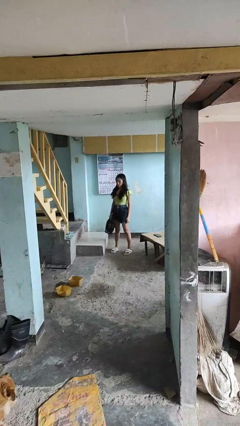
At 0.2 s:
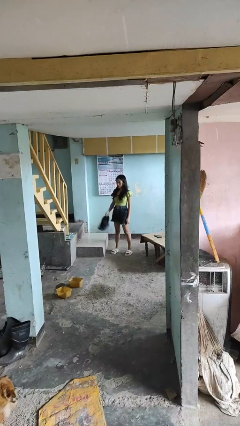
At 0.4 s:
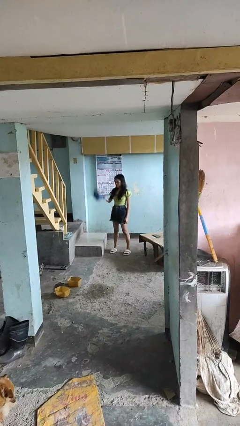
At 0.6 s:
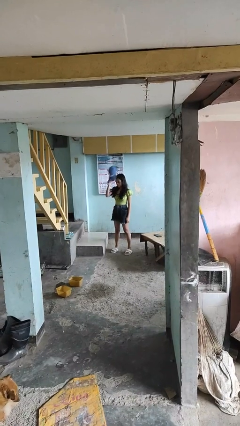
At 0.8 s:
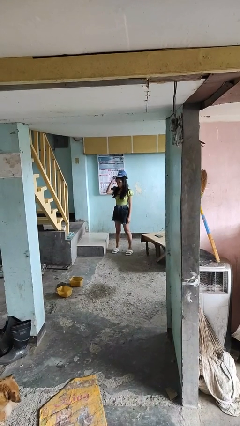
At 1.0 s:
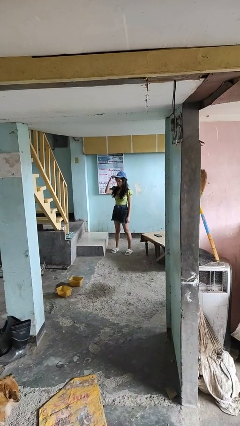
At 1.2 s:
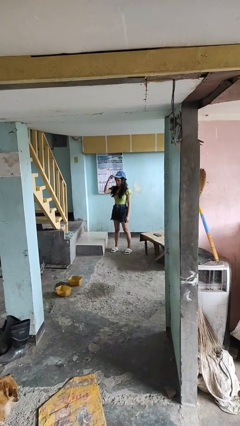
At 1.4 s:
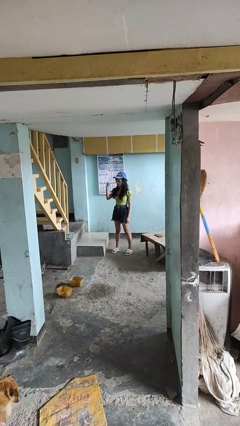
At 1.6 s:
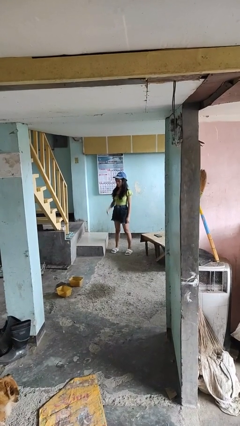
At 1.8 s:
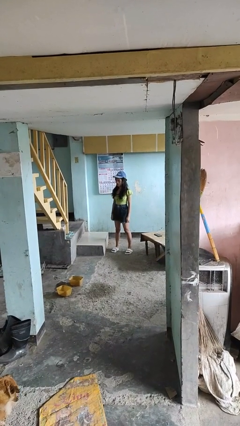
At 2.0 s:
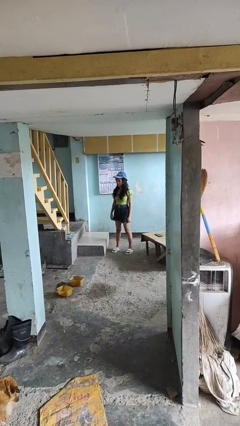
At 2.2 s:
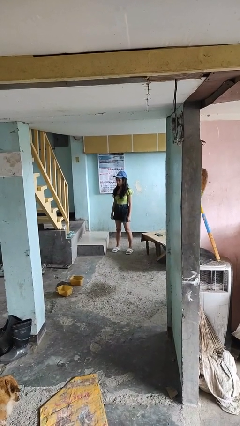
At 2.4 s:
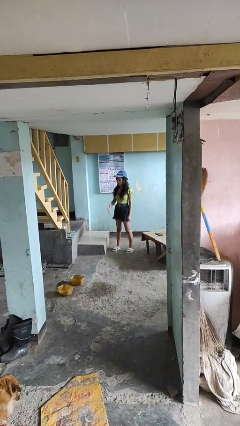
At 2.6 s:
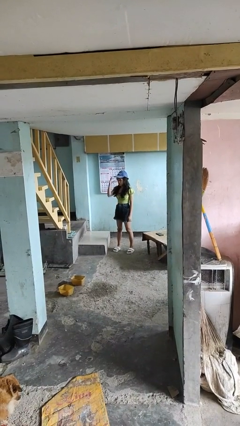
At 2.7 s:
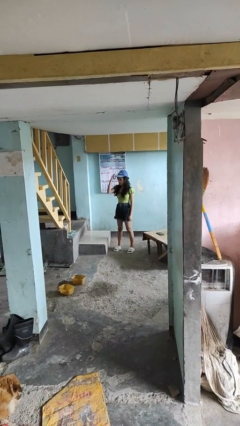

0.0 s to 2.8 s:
person puts on hat

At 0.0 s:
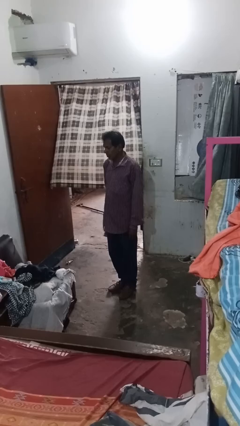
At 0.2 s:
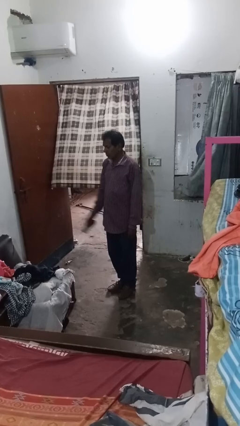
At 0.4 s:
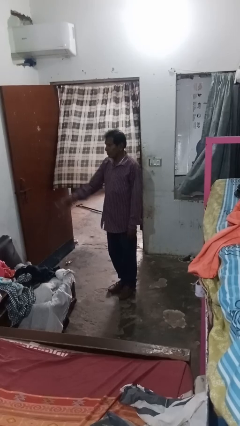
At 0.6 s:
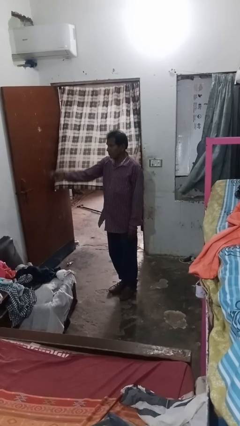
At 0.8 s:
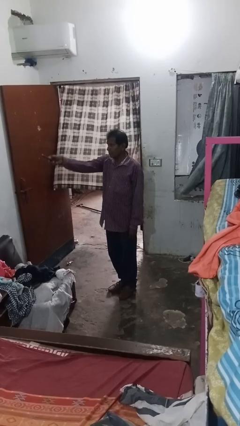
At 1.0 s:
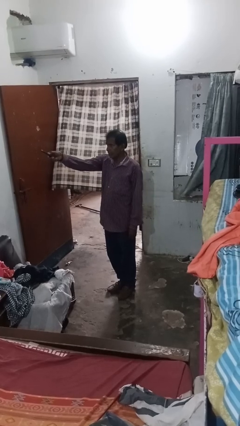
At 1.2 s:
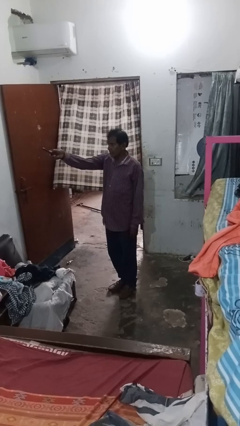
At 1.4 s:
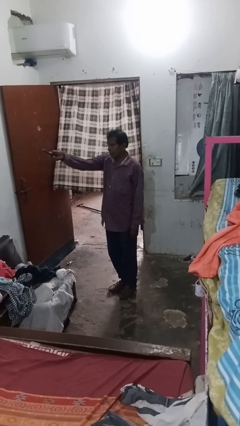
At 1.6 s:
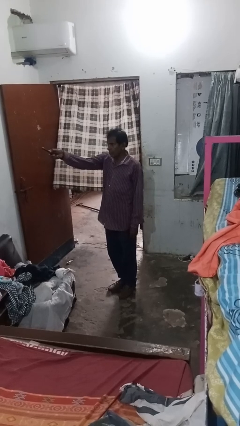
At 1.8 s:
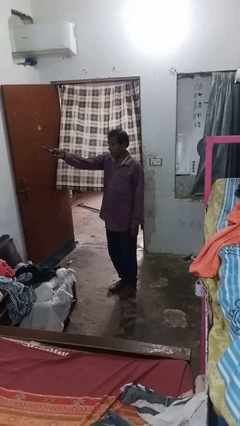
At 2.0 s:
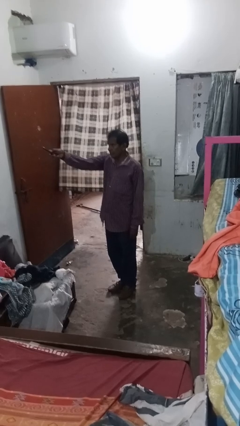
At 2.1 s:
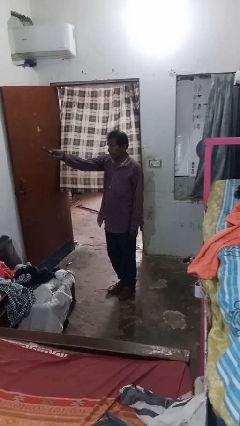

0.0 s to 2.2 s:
person uses television remote

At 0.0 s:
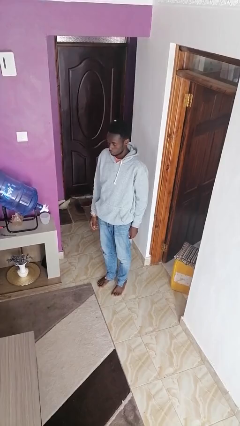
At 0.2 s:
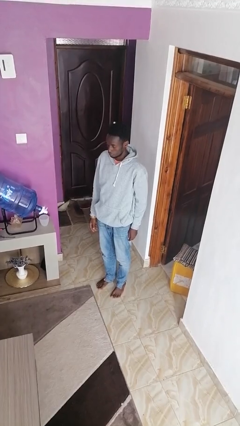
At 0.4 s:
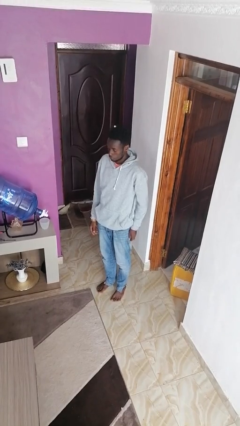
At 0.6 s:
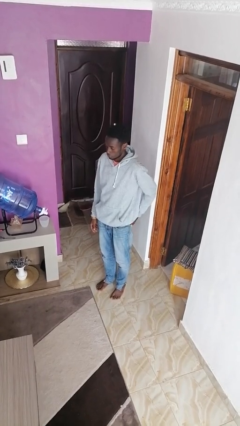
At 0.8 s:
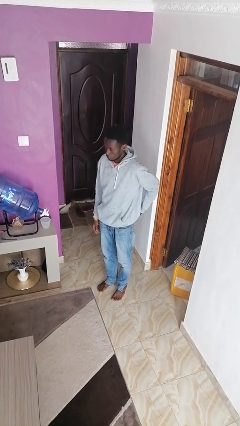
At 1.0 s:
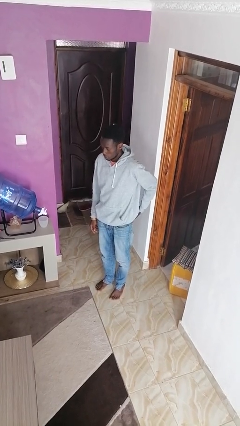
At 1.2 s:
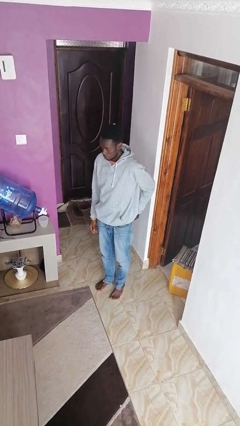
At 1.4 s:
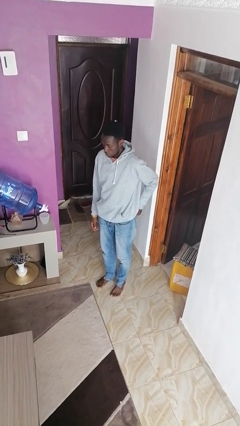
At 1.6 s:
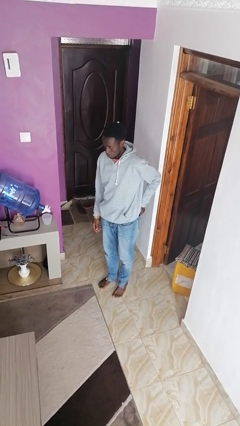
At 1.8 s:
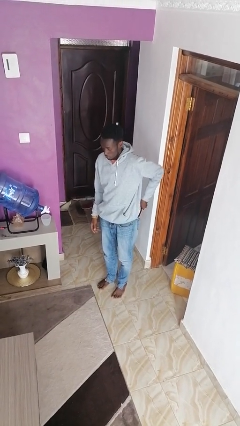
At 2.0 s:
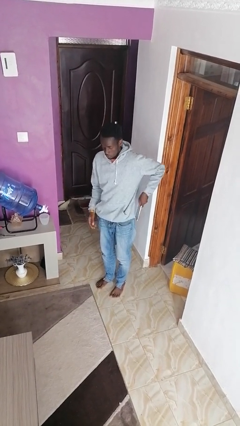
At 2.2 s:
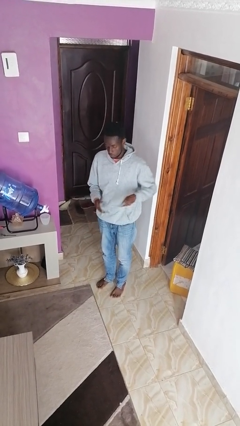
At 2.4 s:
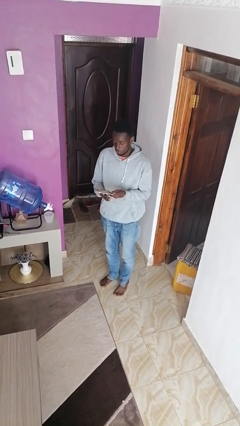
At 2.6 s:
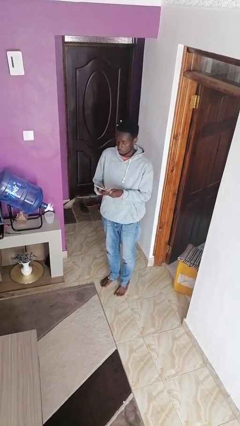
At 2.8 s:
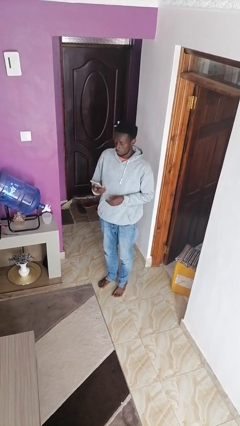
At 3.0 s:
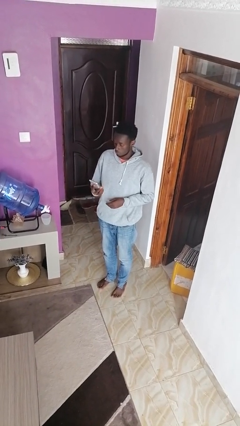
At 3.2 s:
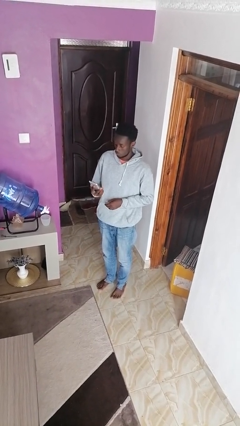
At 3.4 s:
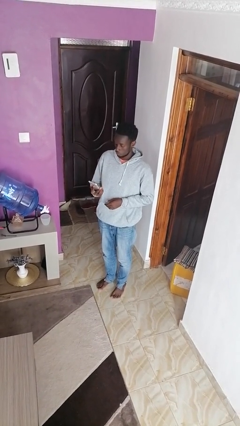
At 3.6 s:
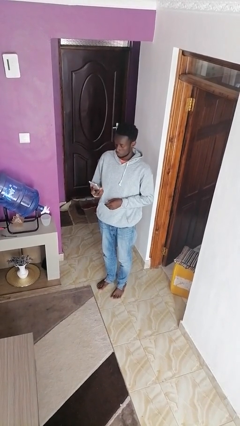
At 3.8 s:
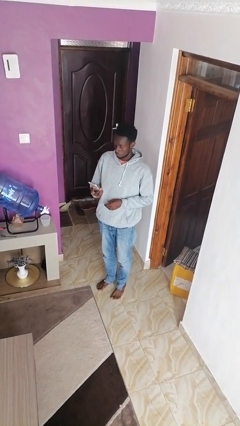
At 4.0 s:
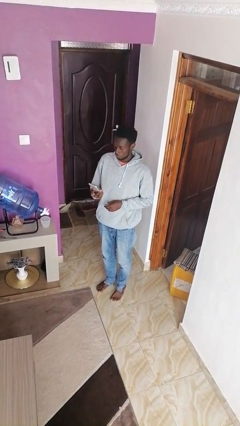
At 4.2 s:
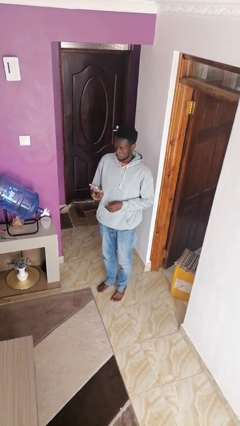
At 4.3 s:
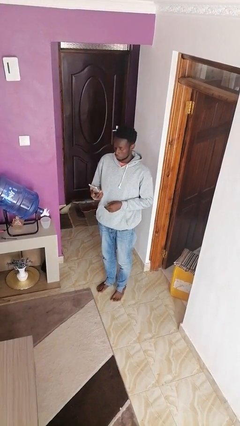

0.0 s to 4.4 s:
person takes phone from pocket

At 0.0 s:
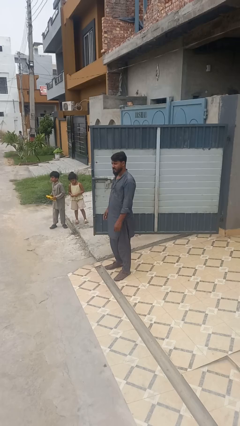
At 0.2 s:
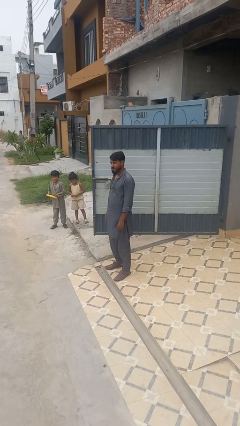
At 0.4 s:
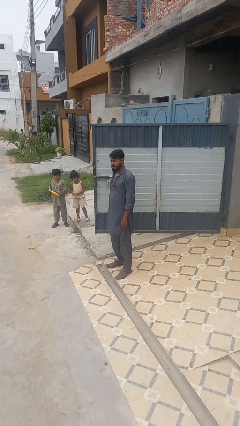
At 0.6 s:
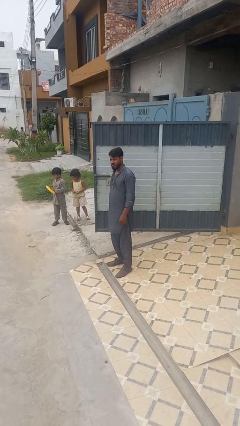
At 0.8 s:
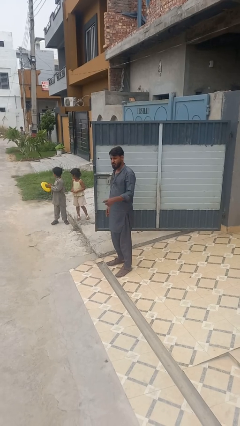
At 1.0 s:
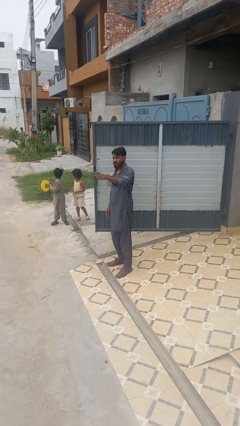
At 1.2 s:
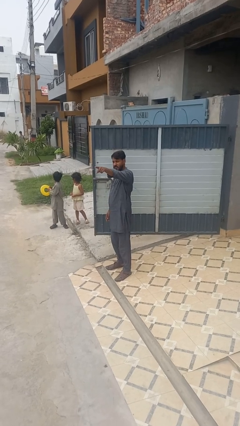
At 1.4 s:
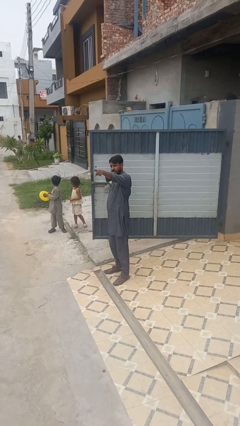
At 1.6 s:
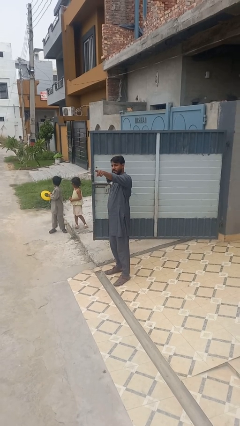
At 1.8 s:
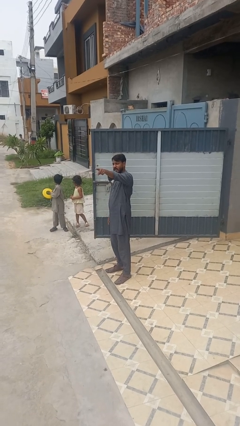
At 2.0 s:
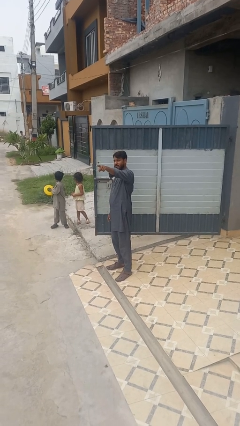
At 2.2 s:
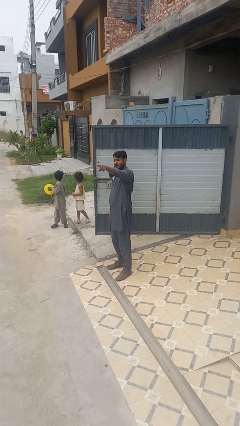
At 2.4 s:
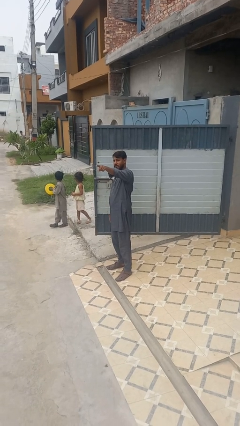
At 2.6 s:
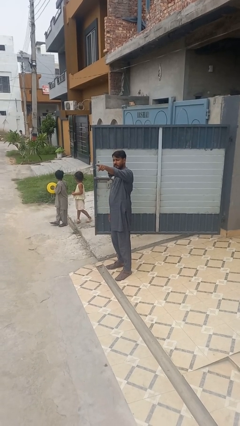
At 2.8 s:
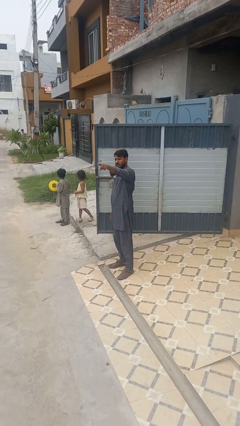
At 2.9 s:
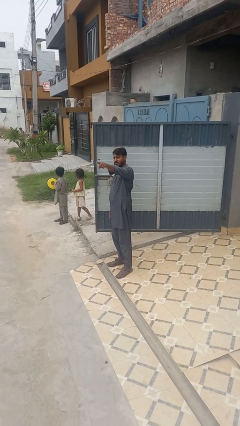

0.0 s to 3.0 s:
person points at person

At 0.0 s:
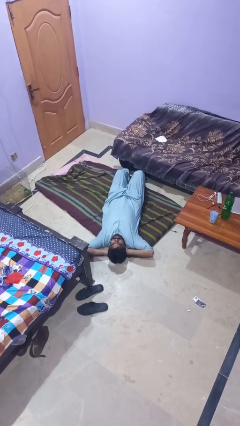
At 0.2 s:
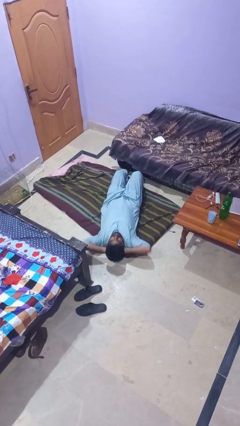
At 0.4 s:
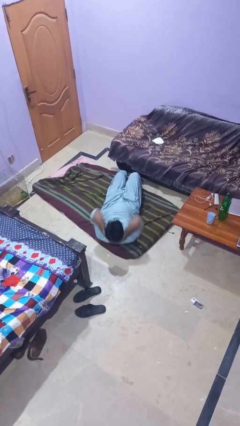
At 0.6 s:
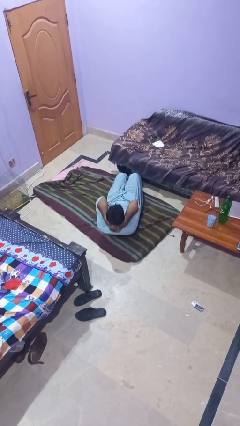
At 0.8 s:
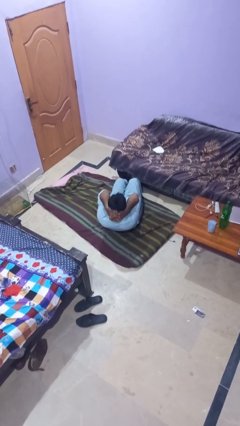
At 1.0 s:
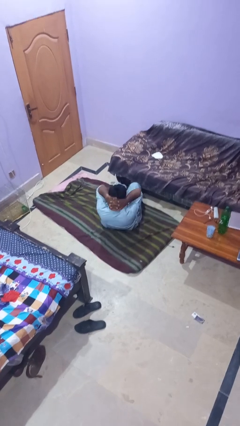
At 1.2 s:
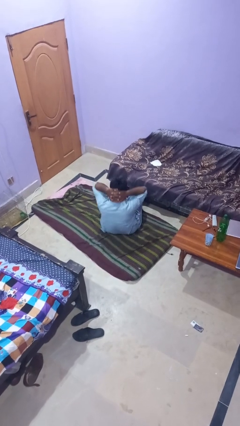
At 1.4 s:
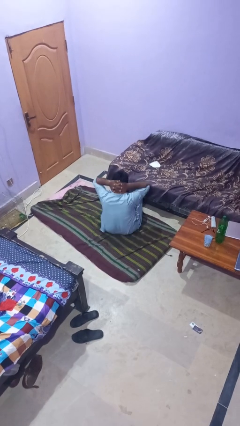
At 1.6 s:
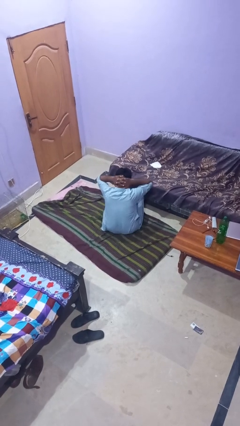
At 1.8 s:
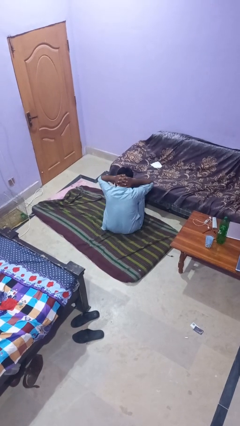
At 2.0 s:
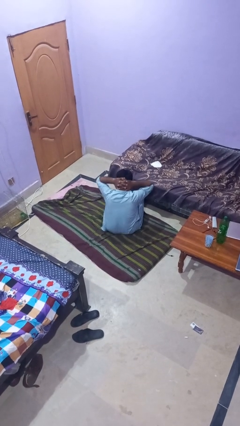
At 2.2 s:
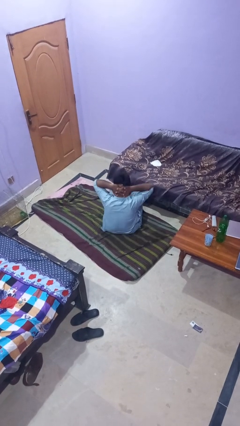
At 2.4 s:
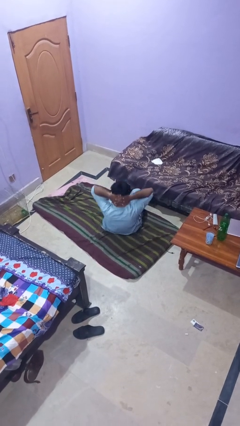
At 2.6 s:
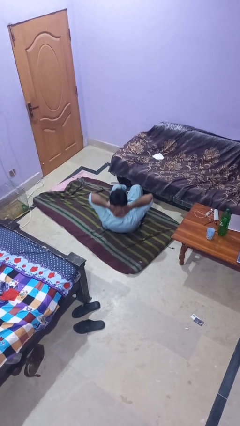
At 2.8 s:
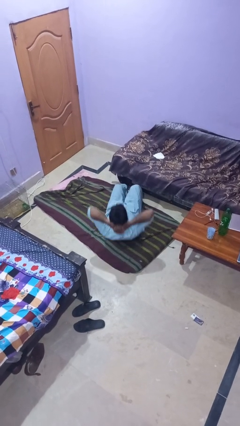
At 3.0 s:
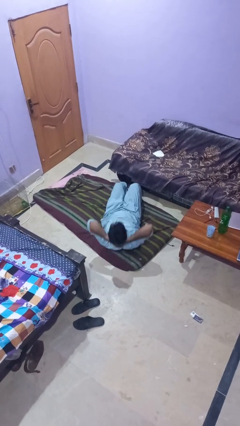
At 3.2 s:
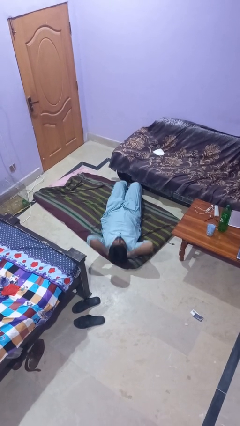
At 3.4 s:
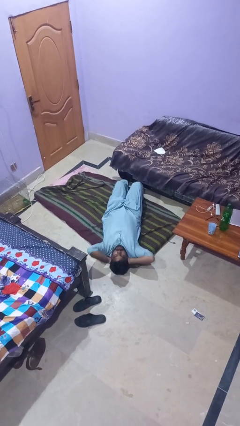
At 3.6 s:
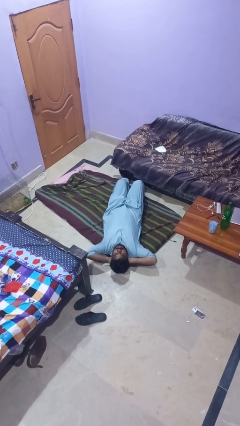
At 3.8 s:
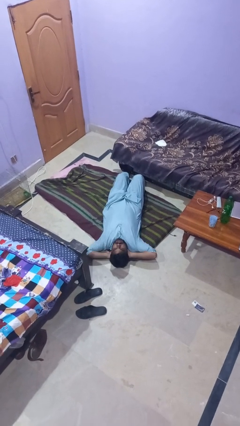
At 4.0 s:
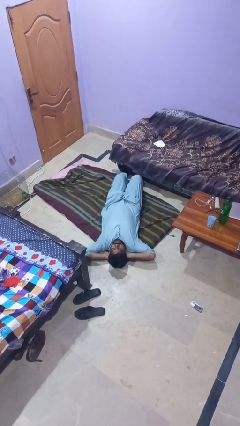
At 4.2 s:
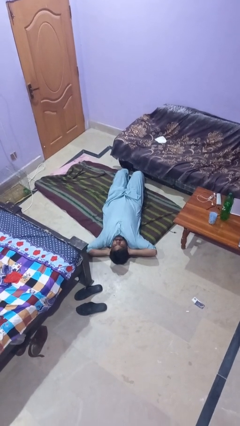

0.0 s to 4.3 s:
person exercises with situp

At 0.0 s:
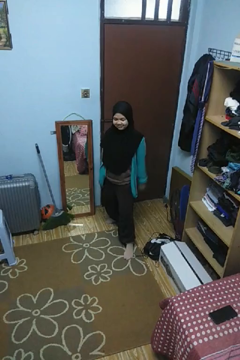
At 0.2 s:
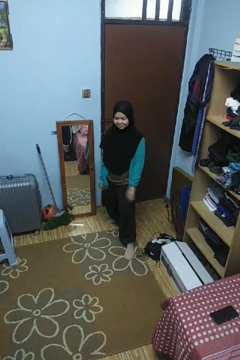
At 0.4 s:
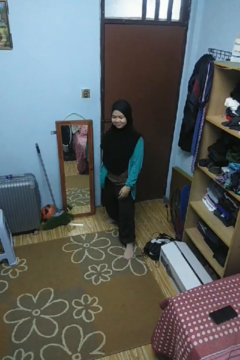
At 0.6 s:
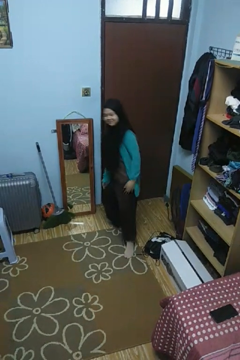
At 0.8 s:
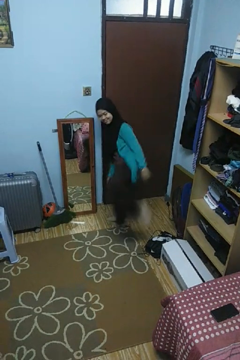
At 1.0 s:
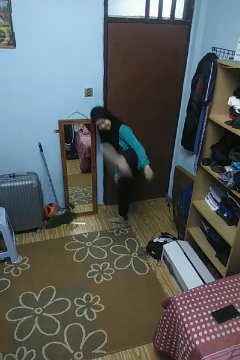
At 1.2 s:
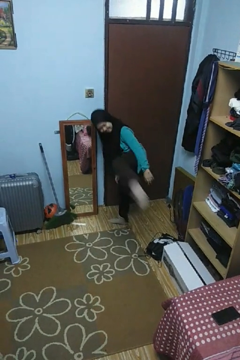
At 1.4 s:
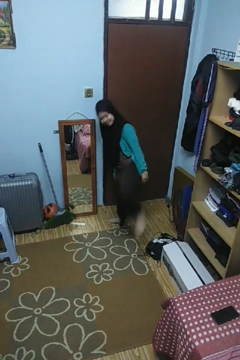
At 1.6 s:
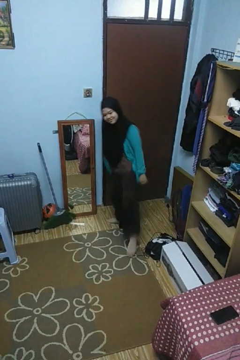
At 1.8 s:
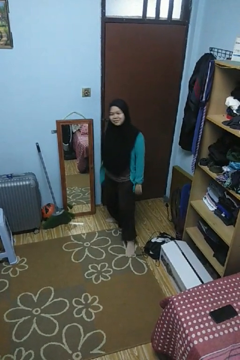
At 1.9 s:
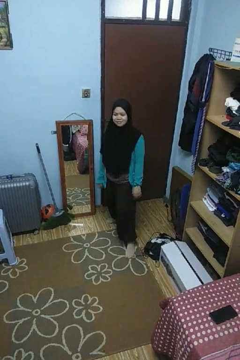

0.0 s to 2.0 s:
person karate kicks
